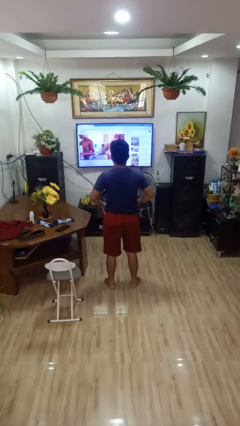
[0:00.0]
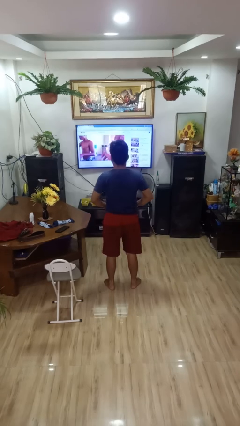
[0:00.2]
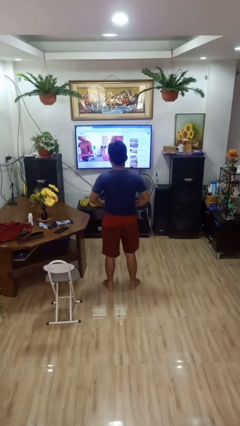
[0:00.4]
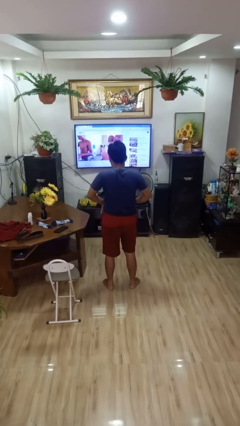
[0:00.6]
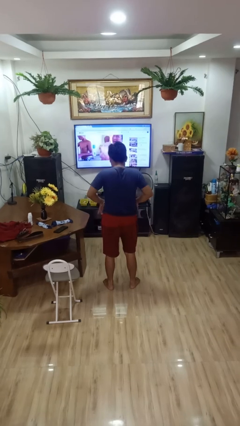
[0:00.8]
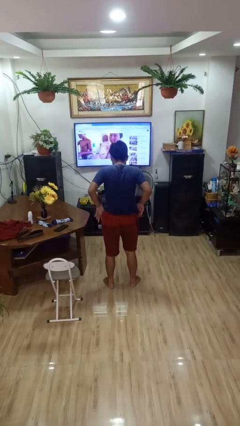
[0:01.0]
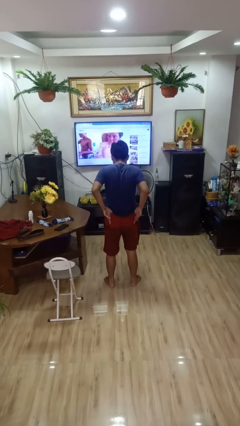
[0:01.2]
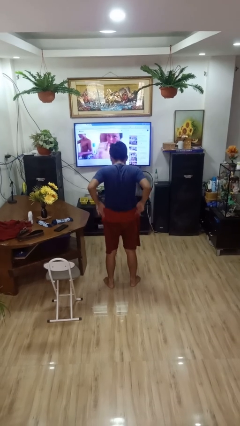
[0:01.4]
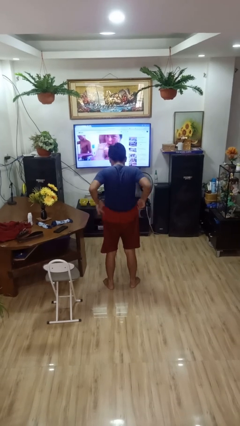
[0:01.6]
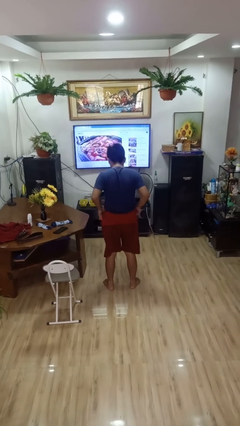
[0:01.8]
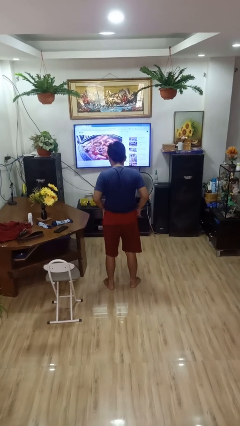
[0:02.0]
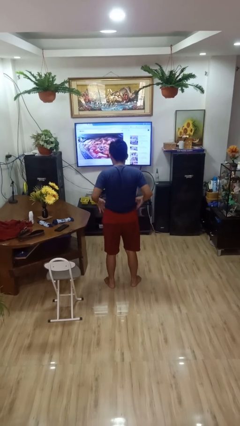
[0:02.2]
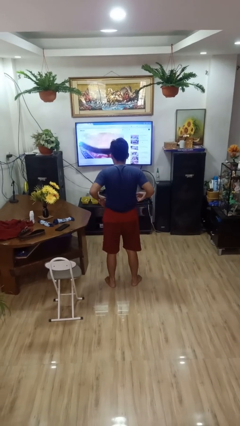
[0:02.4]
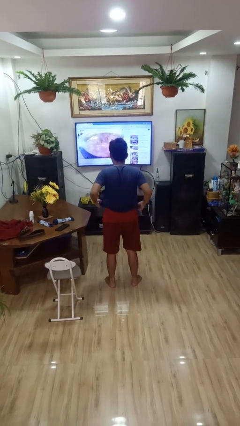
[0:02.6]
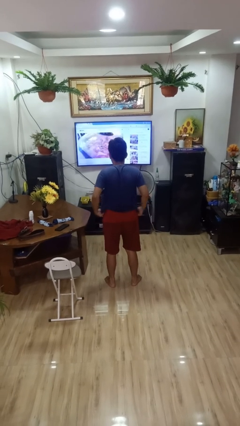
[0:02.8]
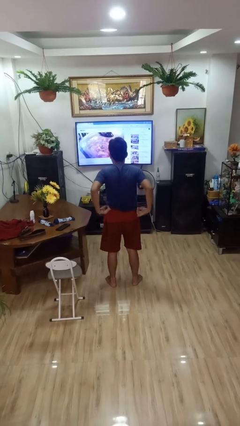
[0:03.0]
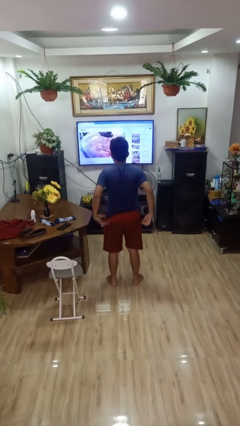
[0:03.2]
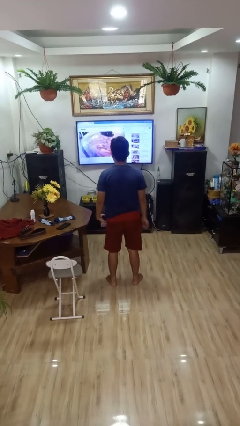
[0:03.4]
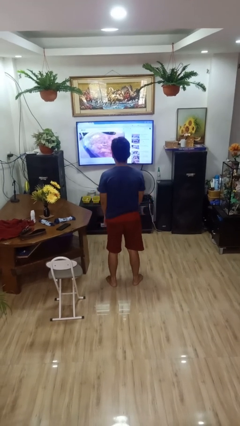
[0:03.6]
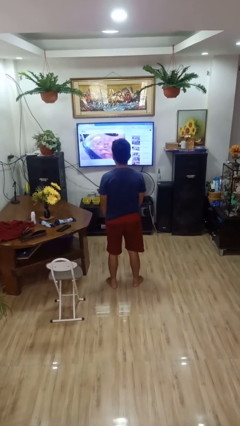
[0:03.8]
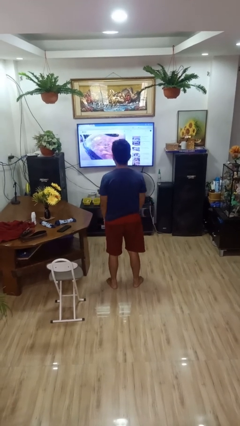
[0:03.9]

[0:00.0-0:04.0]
person hikes up pants

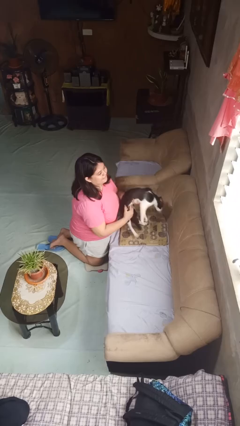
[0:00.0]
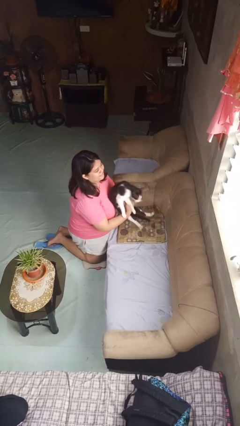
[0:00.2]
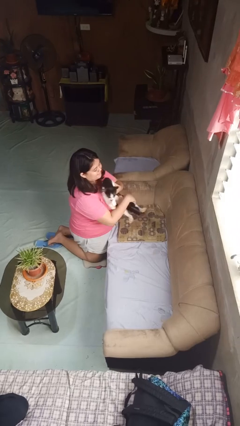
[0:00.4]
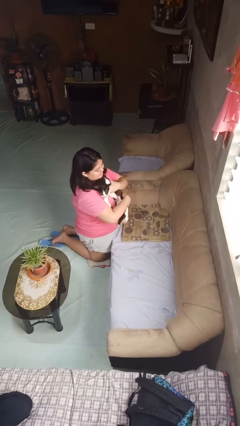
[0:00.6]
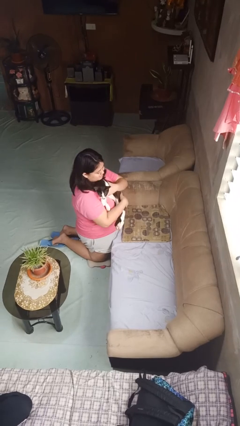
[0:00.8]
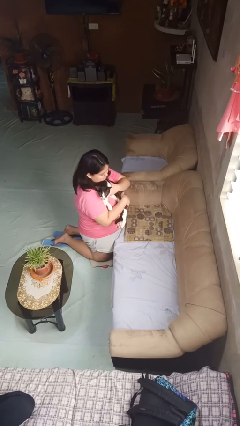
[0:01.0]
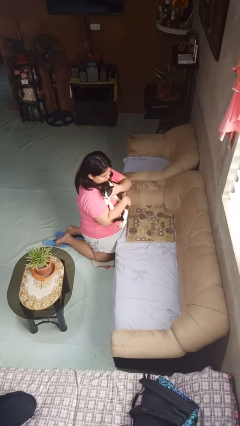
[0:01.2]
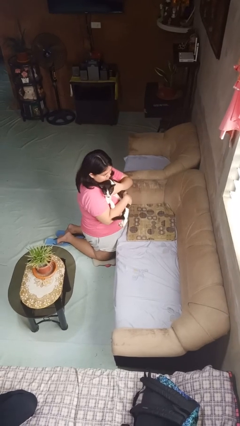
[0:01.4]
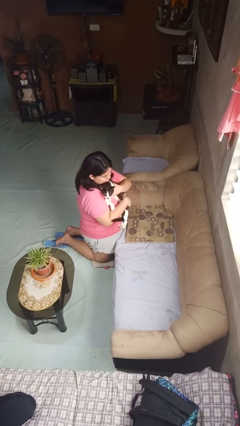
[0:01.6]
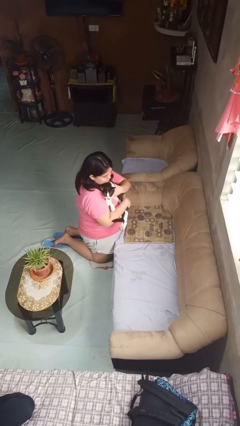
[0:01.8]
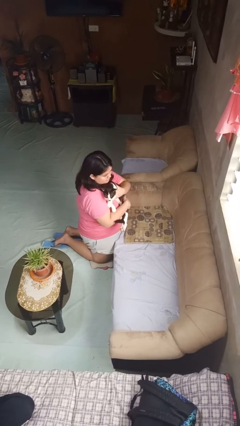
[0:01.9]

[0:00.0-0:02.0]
person hugs cat

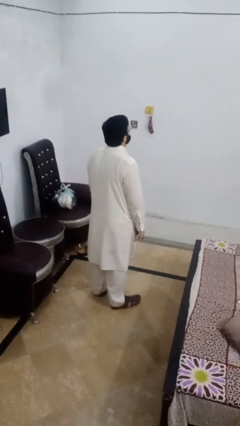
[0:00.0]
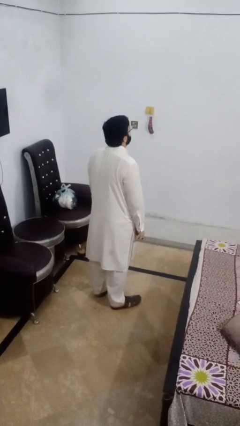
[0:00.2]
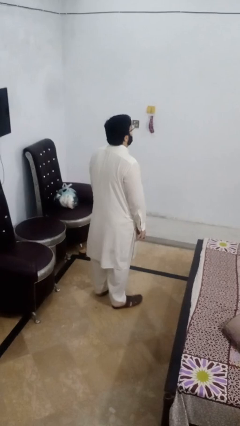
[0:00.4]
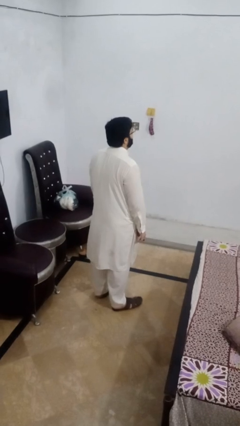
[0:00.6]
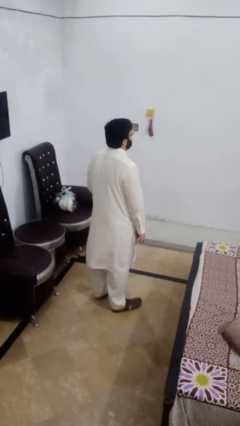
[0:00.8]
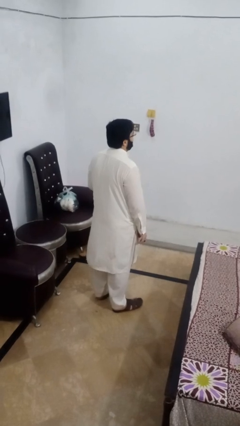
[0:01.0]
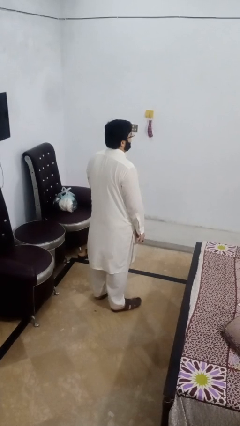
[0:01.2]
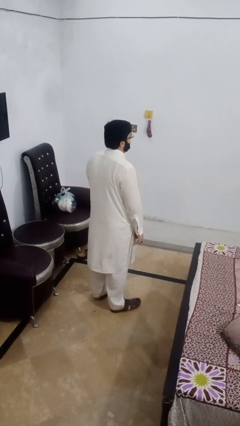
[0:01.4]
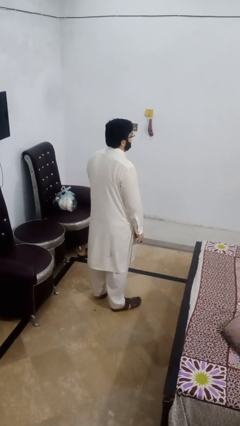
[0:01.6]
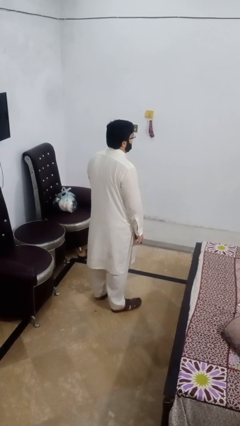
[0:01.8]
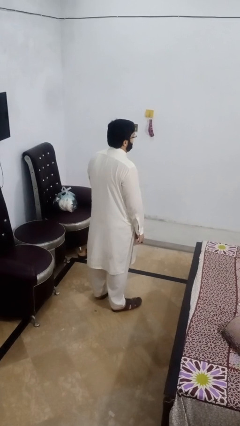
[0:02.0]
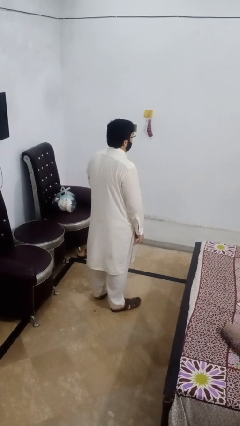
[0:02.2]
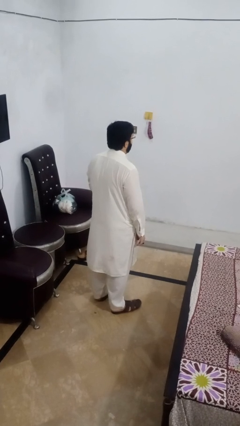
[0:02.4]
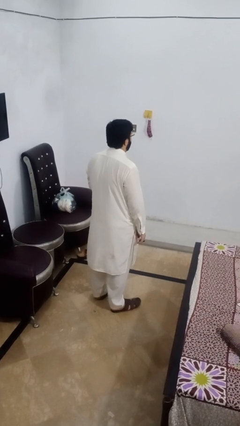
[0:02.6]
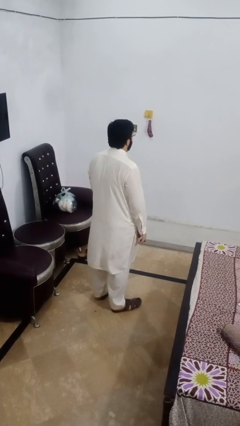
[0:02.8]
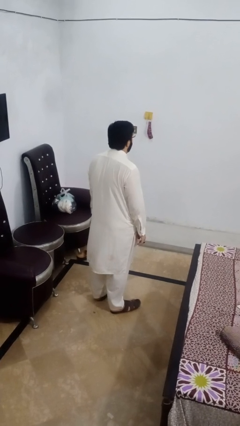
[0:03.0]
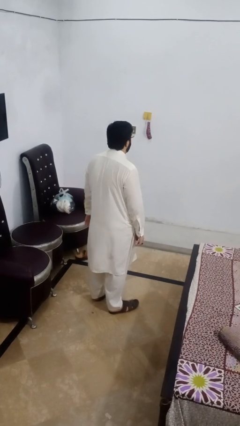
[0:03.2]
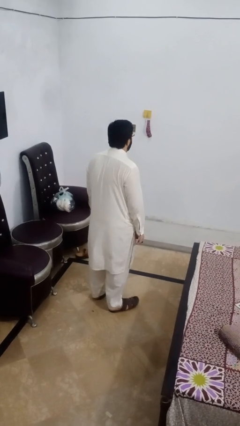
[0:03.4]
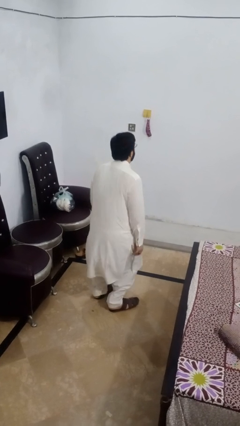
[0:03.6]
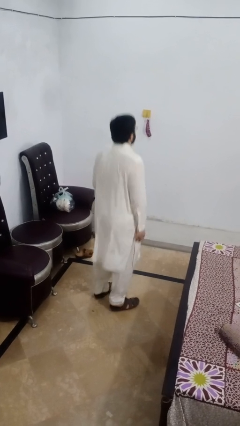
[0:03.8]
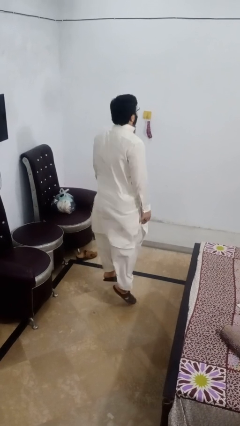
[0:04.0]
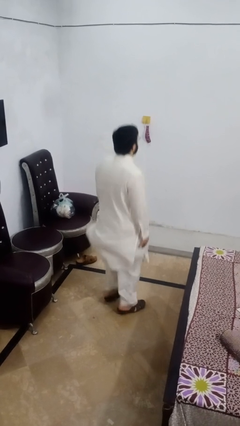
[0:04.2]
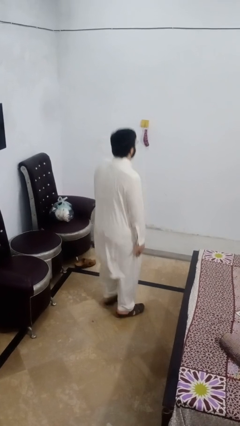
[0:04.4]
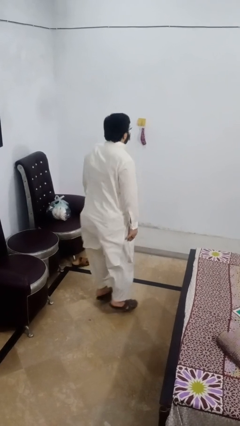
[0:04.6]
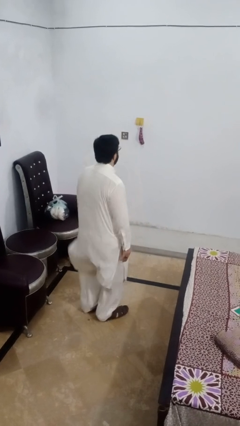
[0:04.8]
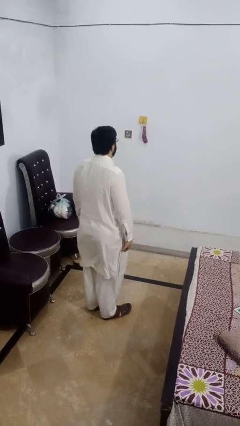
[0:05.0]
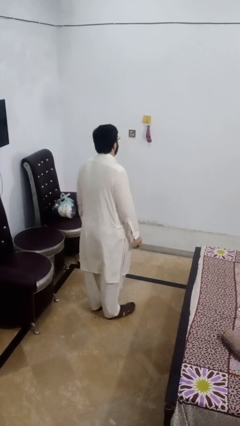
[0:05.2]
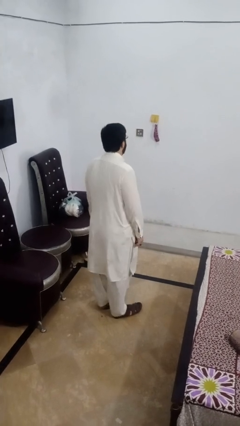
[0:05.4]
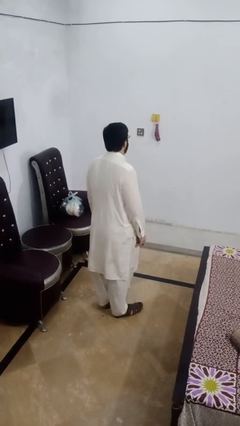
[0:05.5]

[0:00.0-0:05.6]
person jumps

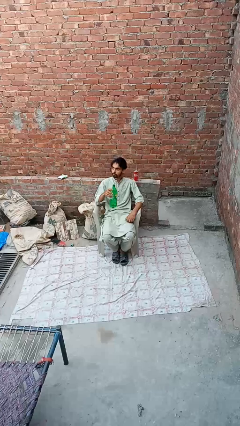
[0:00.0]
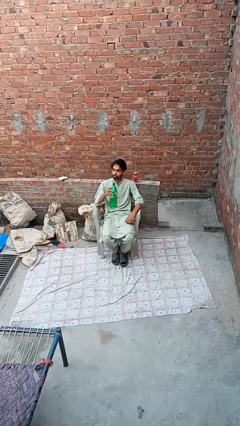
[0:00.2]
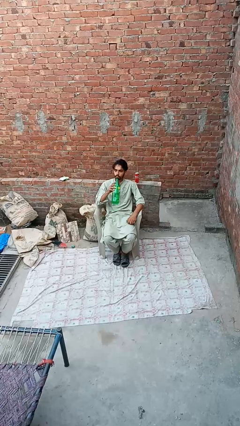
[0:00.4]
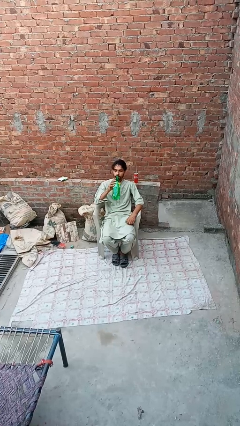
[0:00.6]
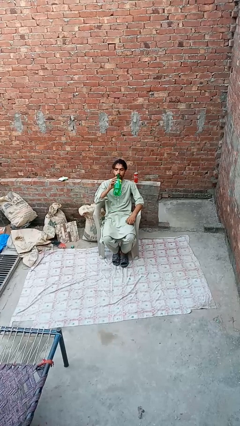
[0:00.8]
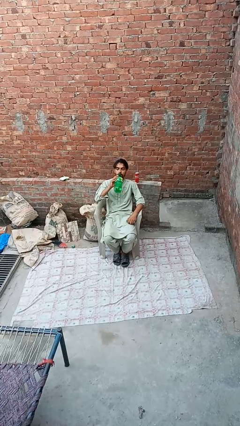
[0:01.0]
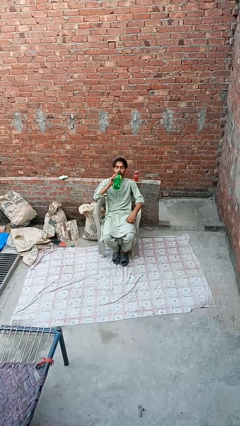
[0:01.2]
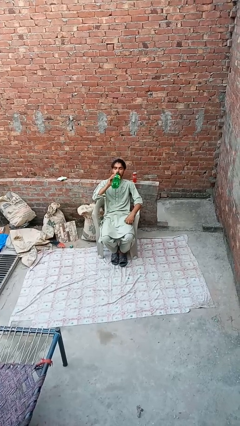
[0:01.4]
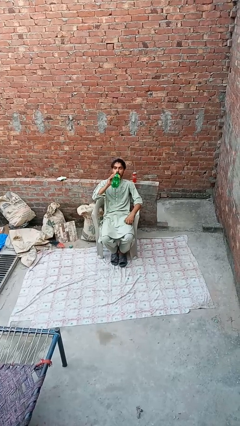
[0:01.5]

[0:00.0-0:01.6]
person drinks from bottle

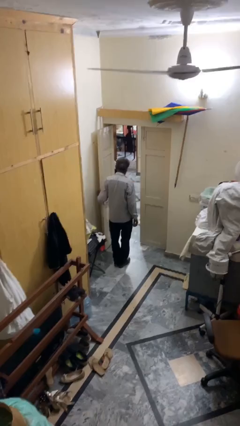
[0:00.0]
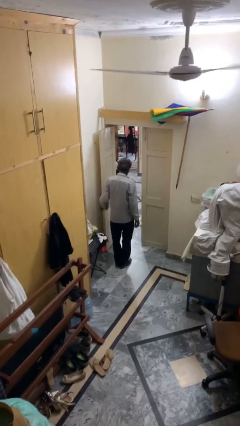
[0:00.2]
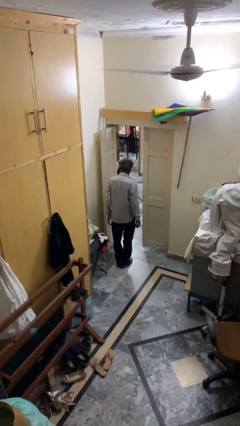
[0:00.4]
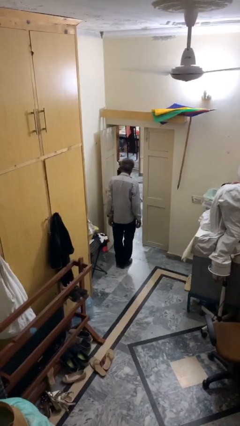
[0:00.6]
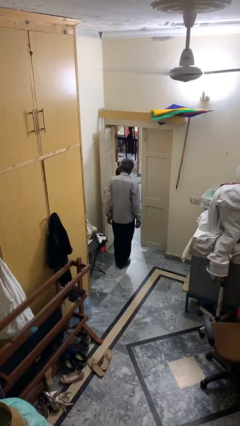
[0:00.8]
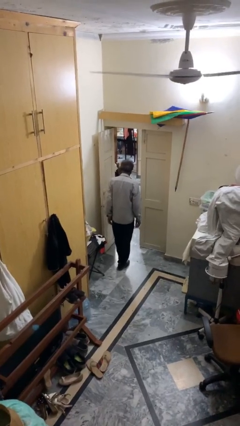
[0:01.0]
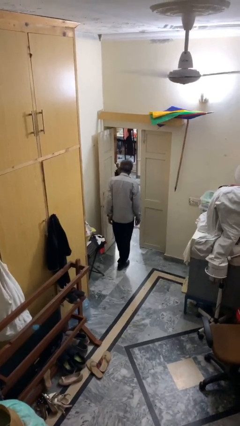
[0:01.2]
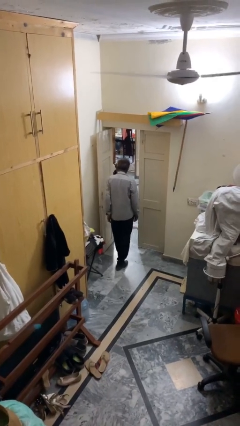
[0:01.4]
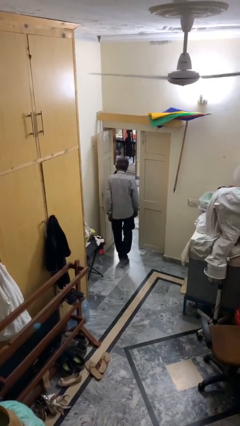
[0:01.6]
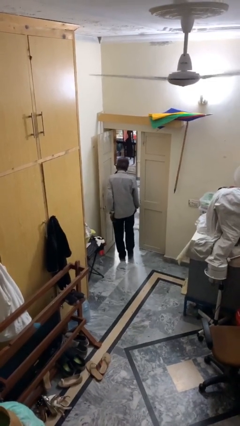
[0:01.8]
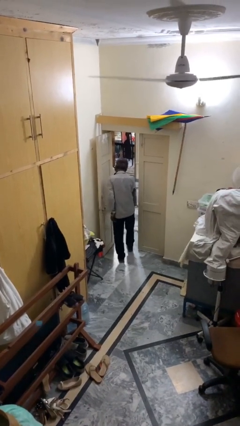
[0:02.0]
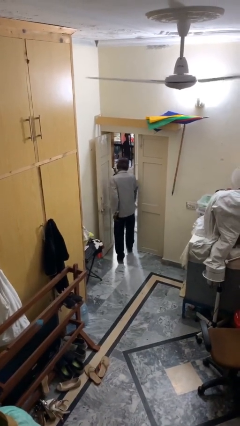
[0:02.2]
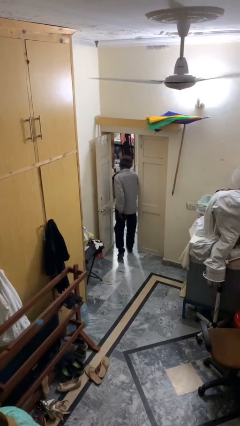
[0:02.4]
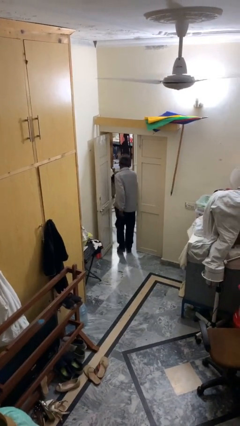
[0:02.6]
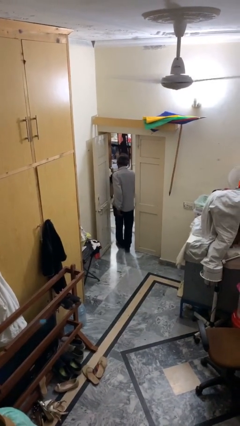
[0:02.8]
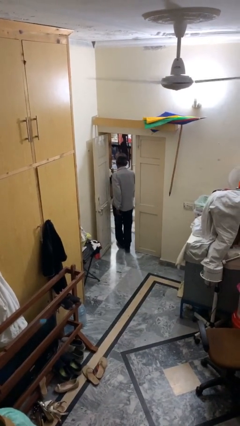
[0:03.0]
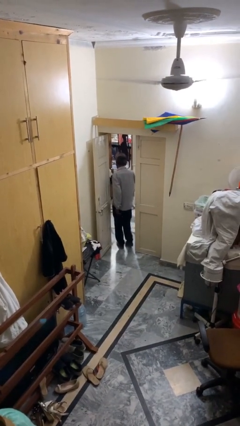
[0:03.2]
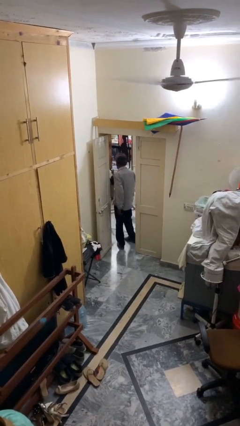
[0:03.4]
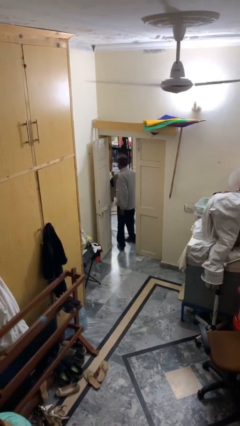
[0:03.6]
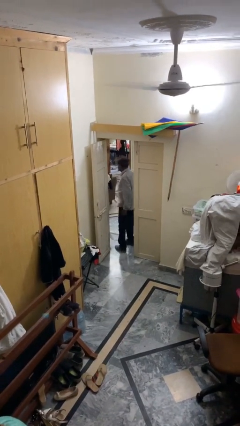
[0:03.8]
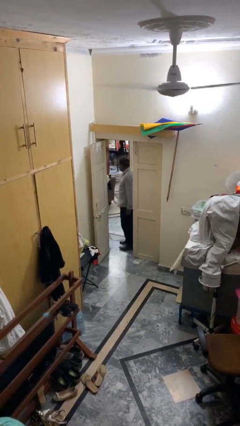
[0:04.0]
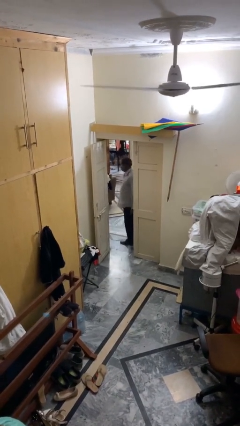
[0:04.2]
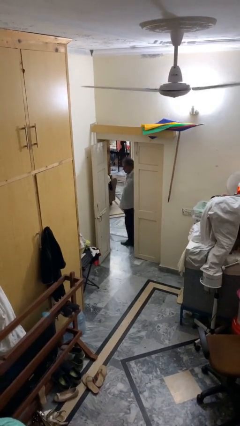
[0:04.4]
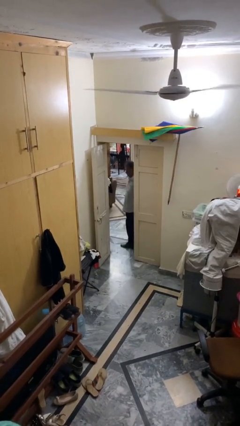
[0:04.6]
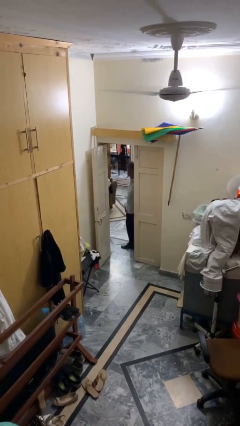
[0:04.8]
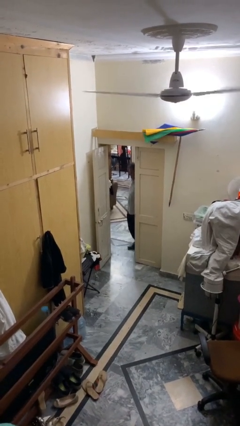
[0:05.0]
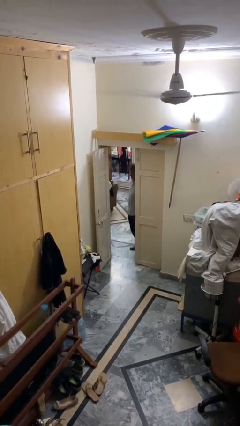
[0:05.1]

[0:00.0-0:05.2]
person exits scene through structure
